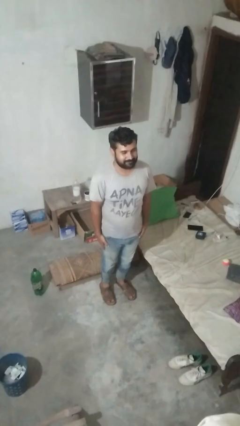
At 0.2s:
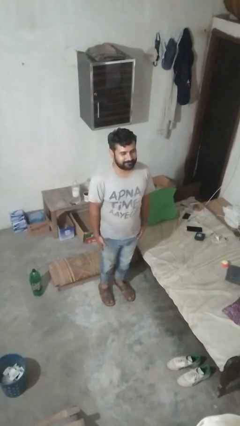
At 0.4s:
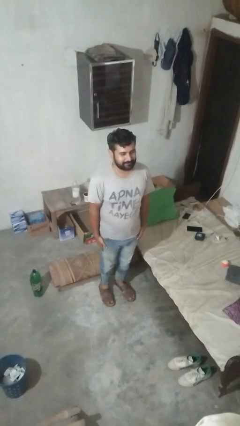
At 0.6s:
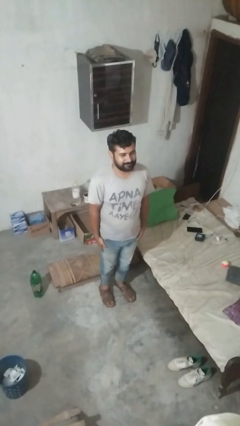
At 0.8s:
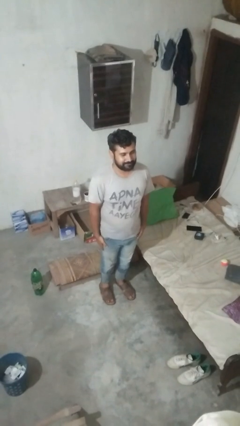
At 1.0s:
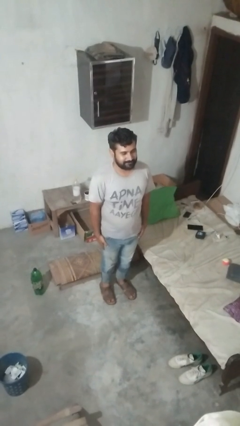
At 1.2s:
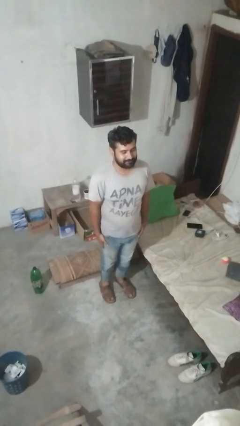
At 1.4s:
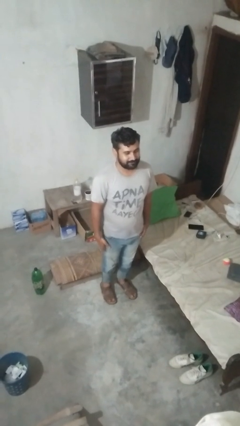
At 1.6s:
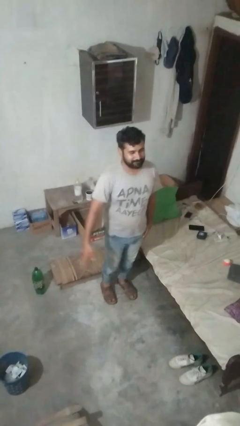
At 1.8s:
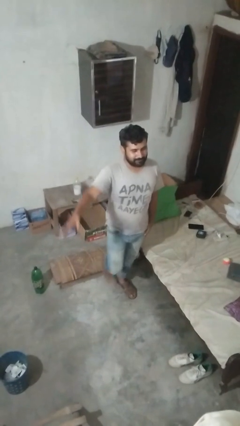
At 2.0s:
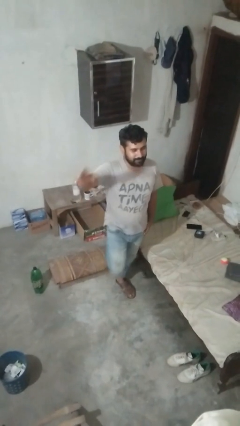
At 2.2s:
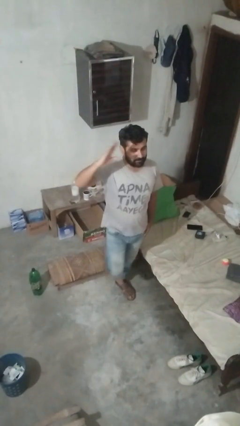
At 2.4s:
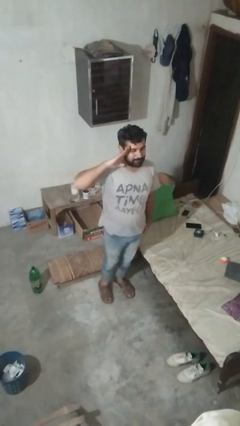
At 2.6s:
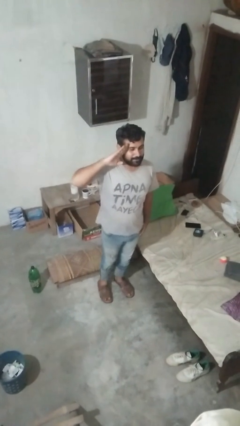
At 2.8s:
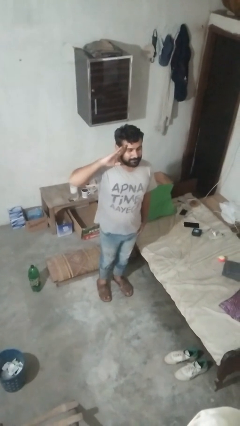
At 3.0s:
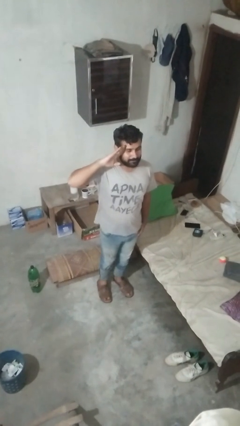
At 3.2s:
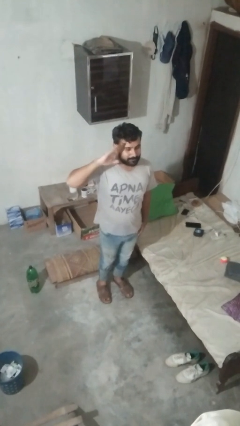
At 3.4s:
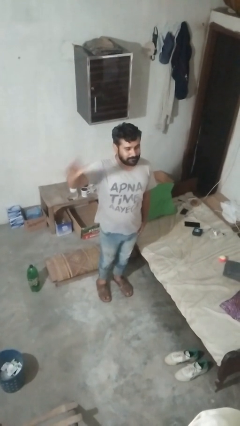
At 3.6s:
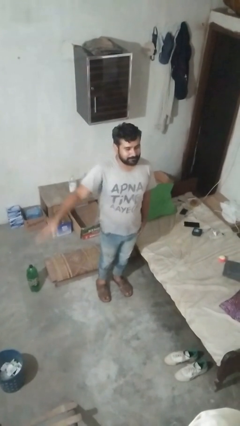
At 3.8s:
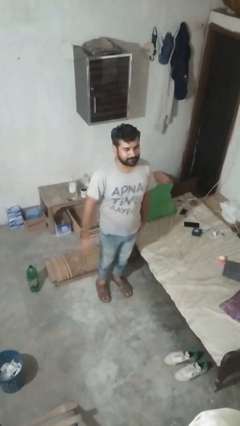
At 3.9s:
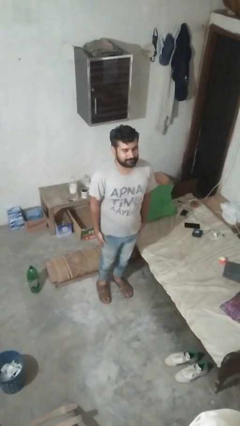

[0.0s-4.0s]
person salutes

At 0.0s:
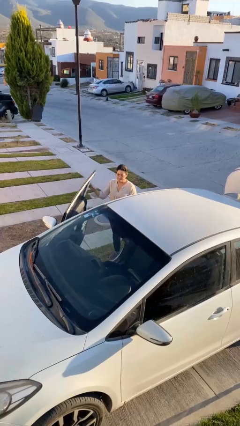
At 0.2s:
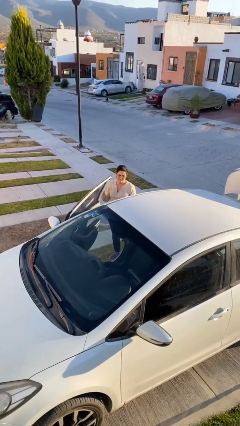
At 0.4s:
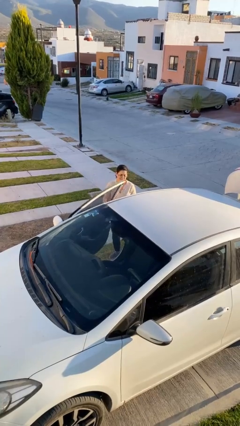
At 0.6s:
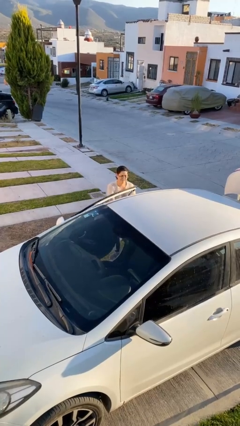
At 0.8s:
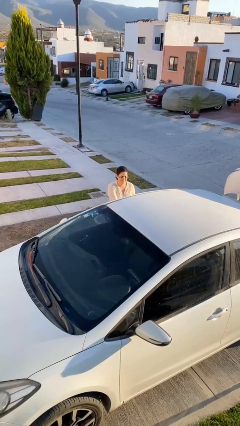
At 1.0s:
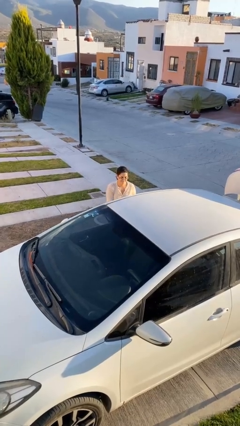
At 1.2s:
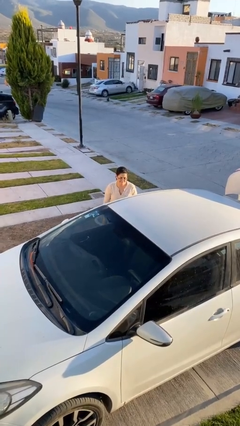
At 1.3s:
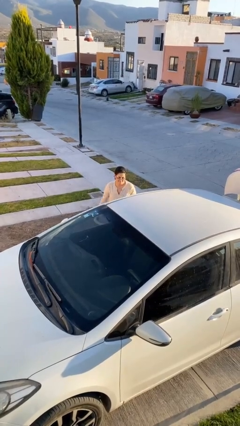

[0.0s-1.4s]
person closes car door

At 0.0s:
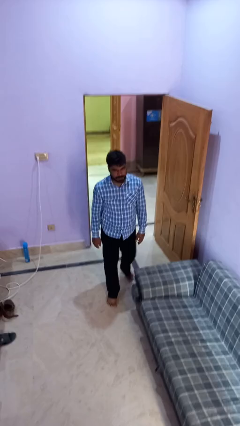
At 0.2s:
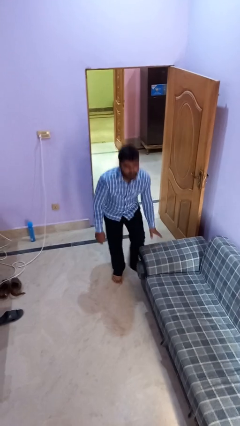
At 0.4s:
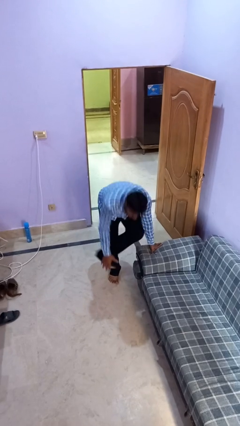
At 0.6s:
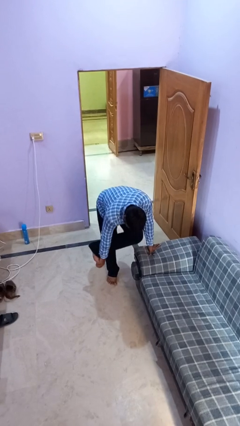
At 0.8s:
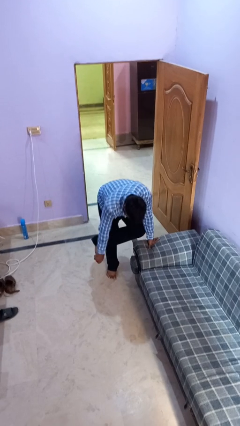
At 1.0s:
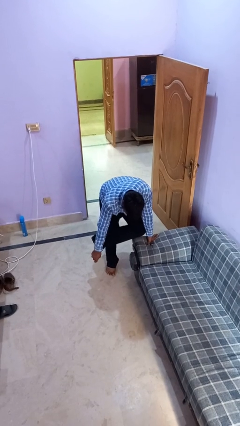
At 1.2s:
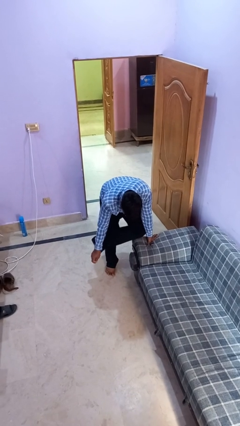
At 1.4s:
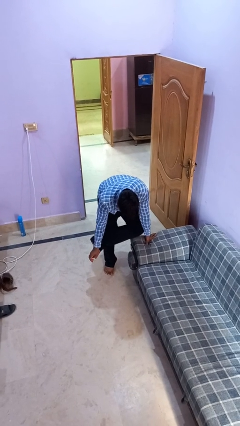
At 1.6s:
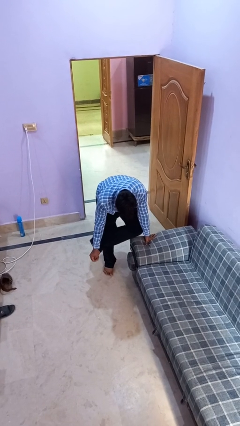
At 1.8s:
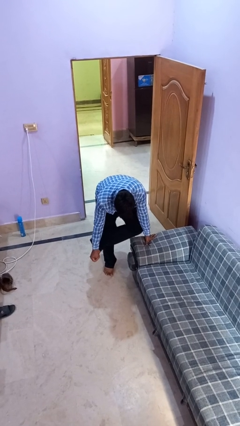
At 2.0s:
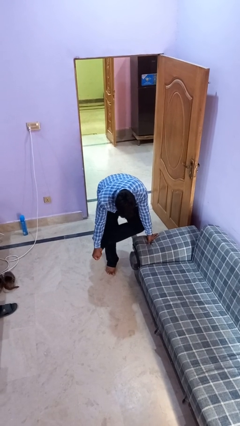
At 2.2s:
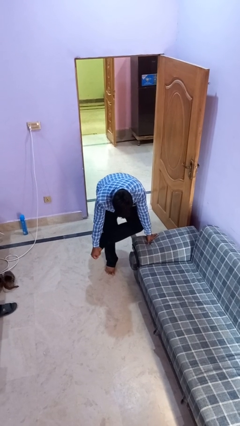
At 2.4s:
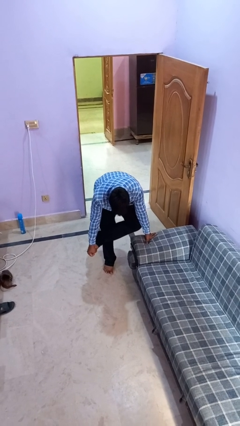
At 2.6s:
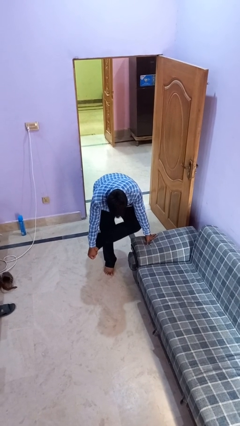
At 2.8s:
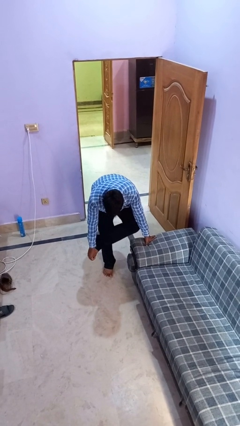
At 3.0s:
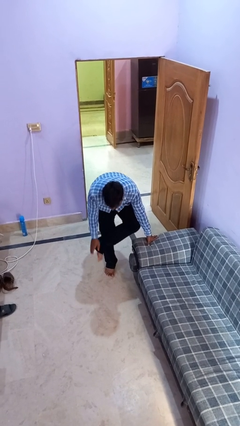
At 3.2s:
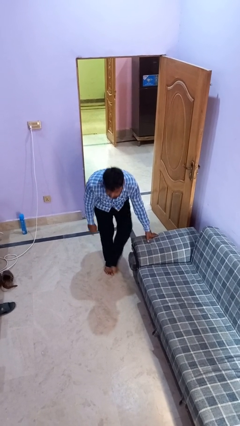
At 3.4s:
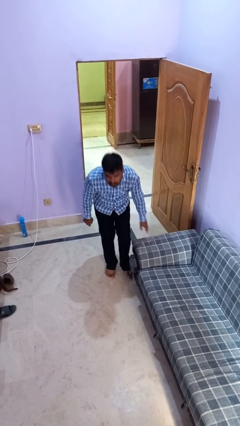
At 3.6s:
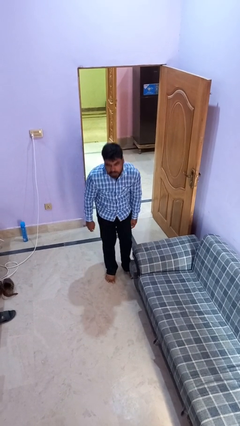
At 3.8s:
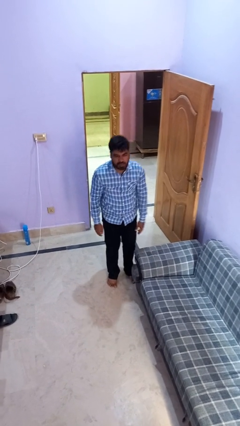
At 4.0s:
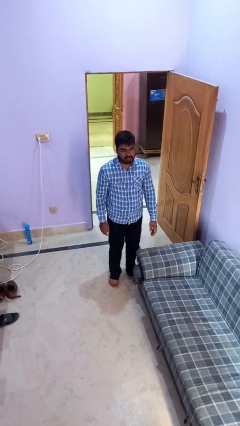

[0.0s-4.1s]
person stubs toe

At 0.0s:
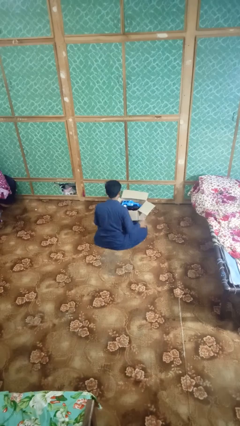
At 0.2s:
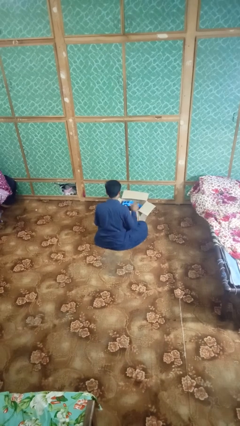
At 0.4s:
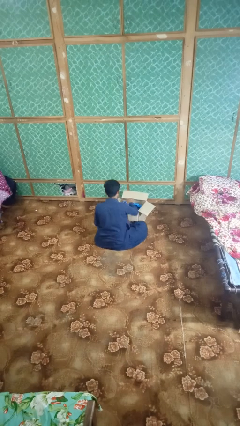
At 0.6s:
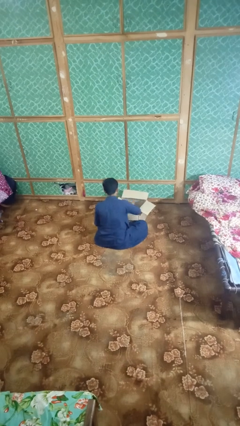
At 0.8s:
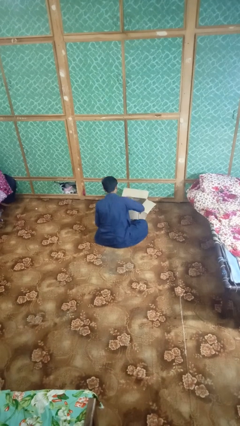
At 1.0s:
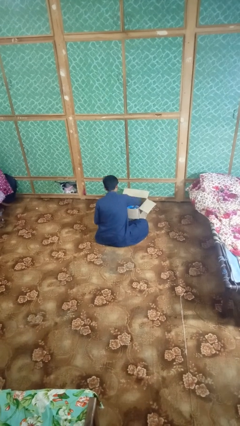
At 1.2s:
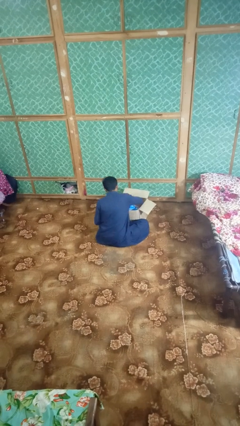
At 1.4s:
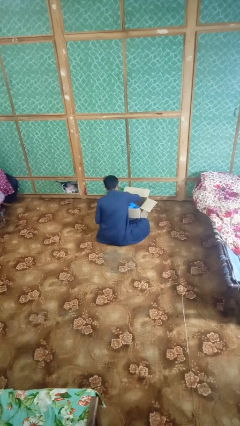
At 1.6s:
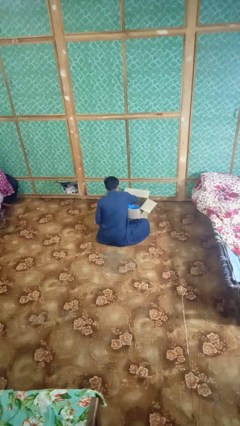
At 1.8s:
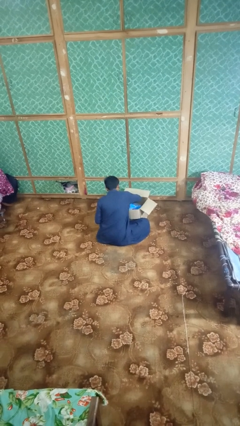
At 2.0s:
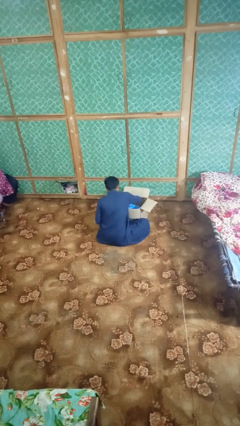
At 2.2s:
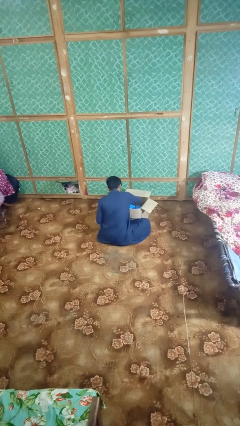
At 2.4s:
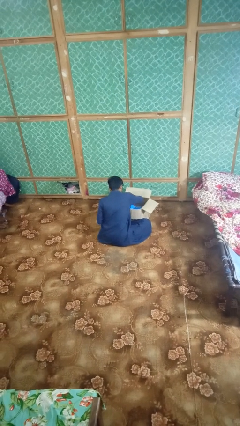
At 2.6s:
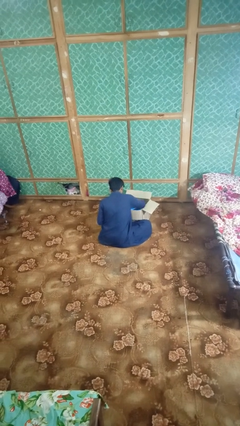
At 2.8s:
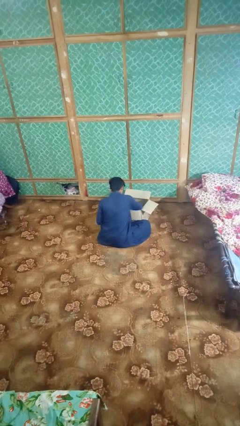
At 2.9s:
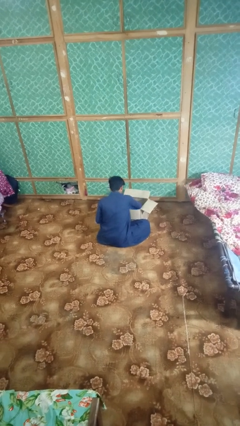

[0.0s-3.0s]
person searches in box

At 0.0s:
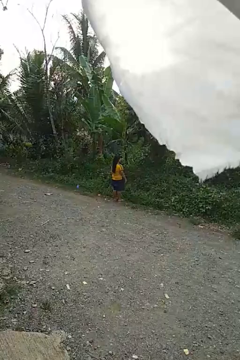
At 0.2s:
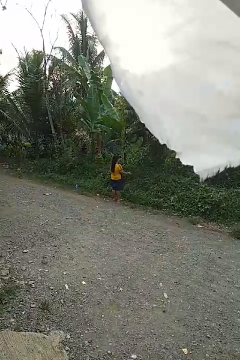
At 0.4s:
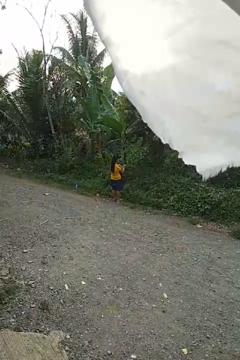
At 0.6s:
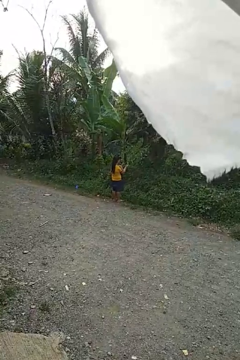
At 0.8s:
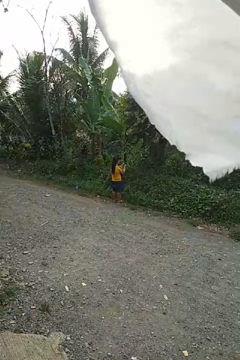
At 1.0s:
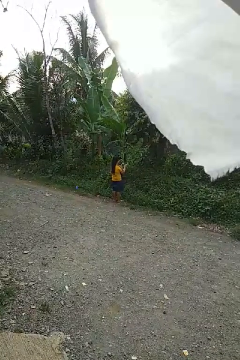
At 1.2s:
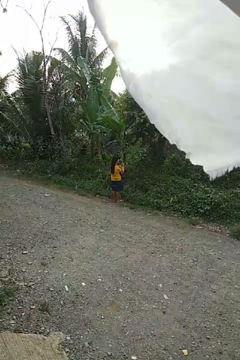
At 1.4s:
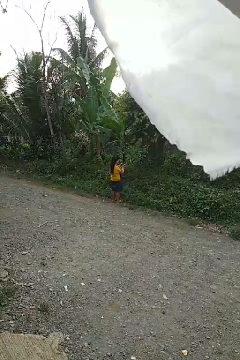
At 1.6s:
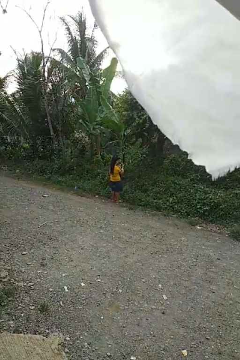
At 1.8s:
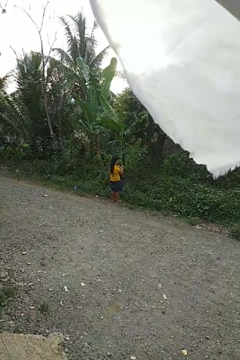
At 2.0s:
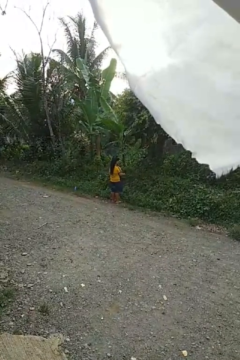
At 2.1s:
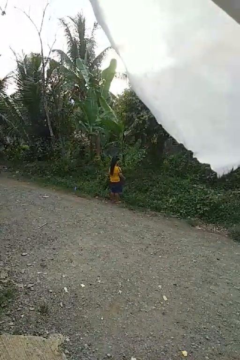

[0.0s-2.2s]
person claps hands

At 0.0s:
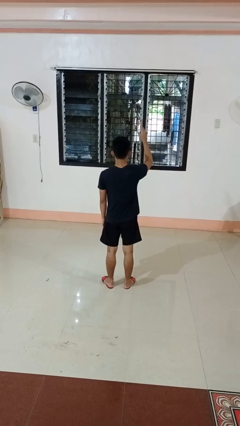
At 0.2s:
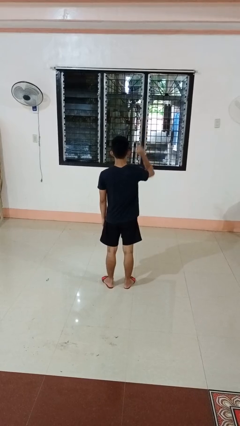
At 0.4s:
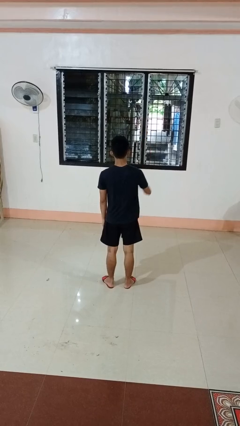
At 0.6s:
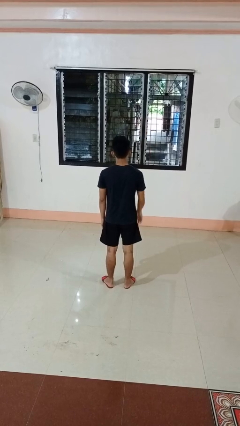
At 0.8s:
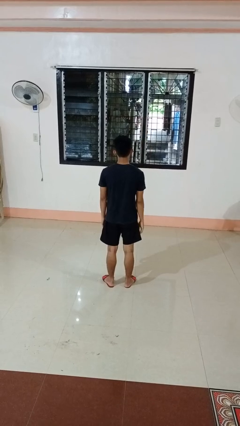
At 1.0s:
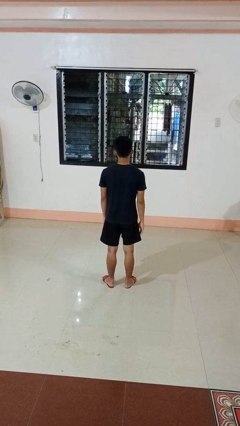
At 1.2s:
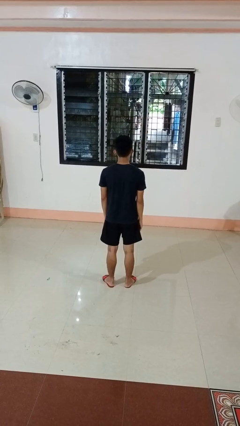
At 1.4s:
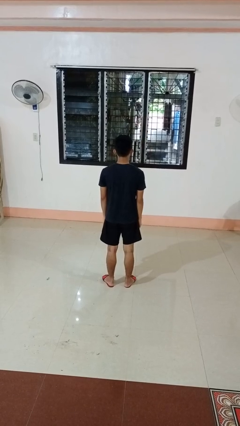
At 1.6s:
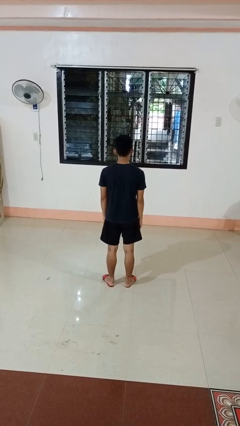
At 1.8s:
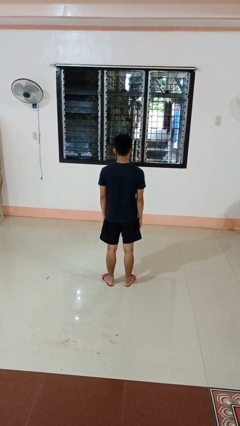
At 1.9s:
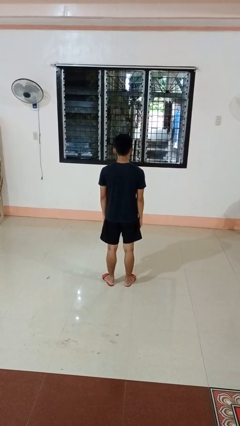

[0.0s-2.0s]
person gestures swipe down

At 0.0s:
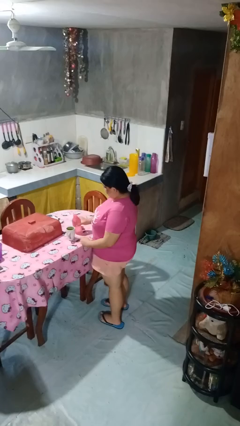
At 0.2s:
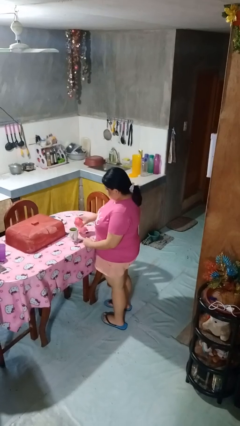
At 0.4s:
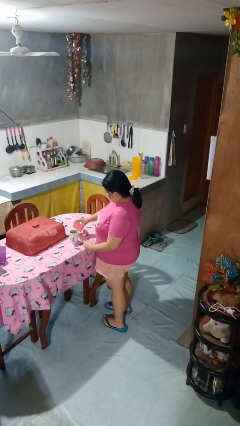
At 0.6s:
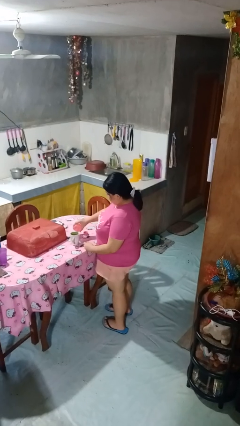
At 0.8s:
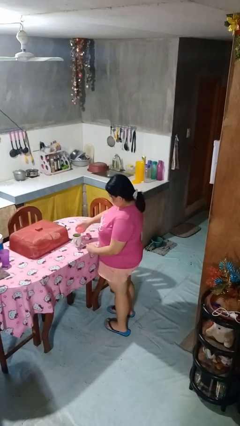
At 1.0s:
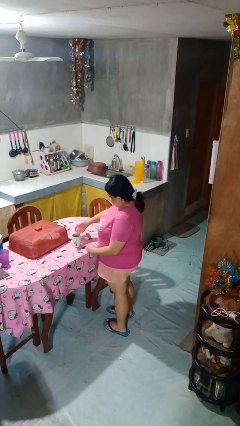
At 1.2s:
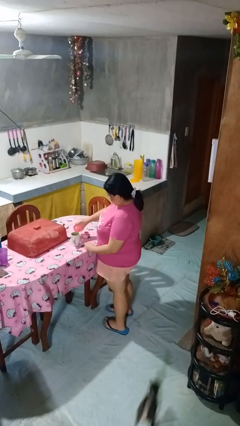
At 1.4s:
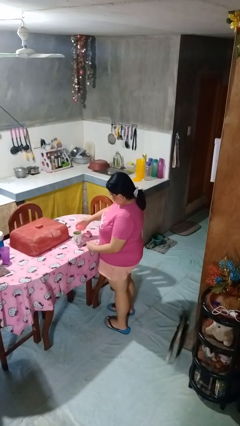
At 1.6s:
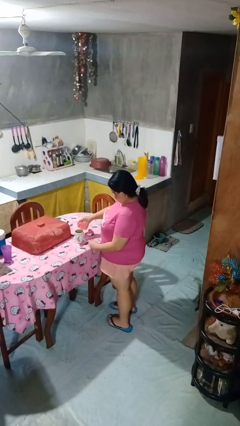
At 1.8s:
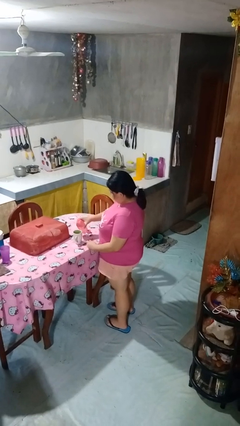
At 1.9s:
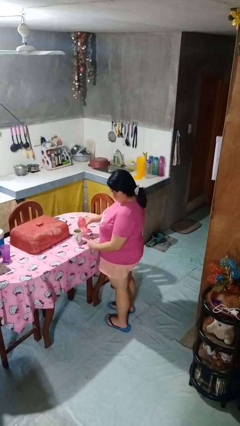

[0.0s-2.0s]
person pours liquid into cup
